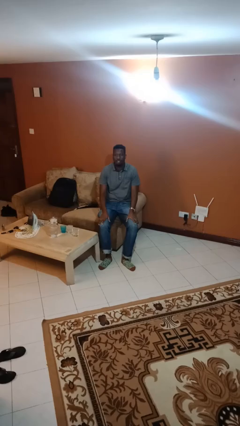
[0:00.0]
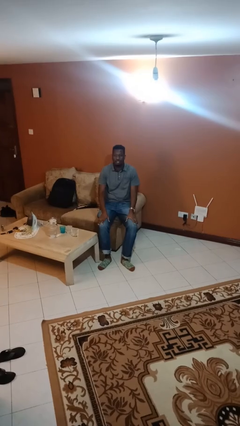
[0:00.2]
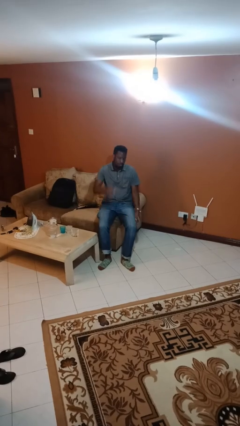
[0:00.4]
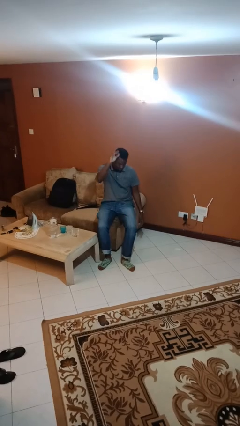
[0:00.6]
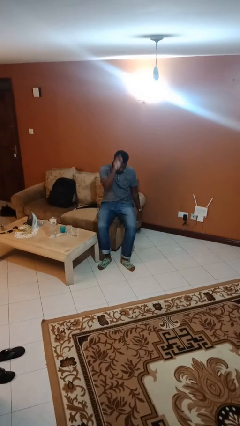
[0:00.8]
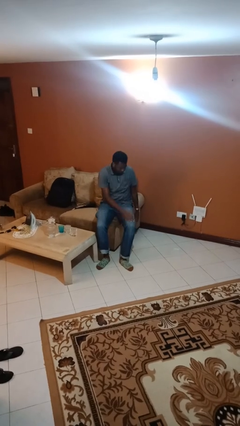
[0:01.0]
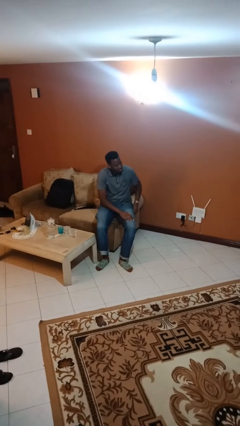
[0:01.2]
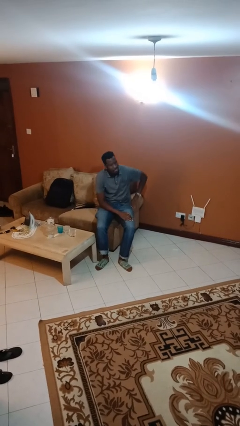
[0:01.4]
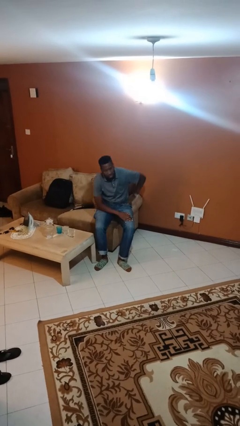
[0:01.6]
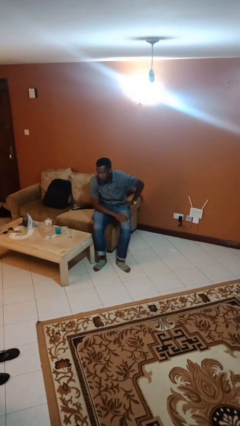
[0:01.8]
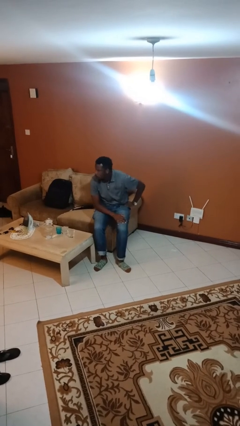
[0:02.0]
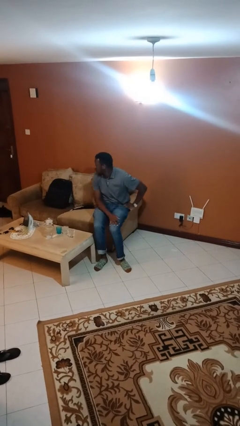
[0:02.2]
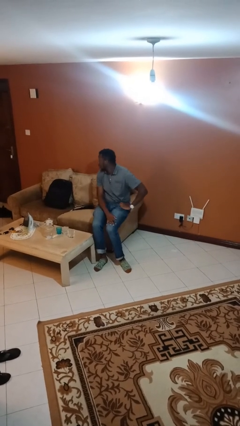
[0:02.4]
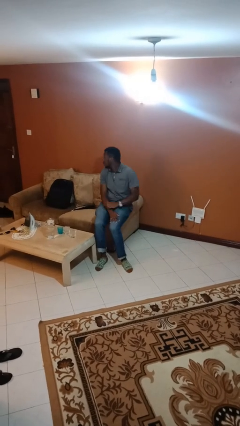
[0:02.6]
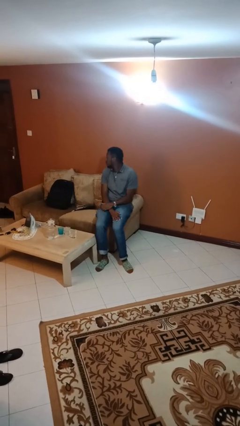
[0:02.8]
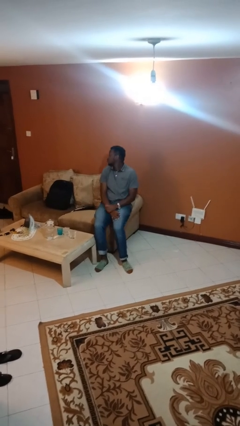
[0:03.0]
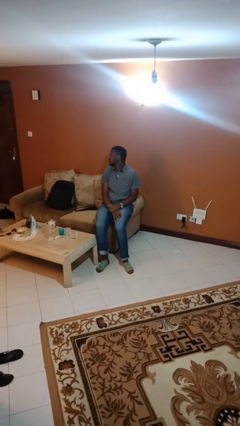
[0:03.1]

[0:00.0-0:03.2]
person slaps hands on thighs

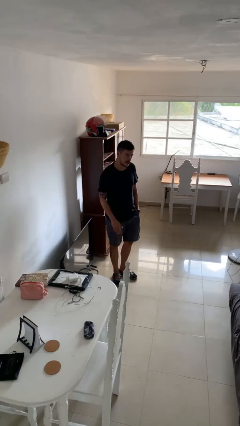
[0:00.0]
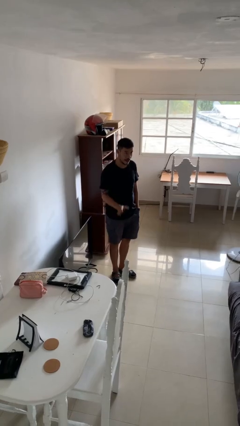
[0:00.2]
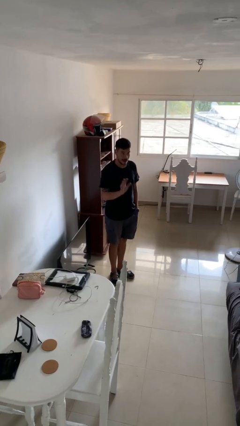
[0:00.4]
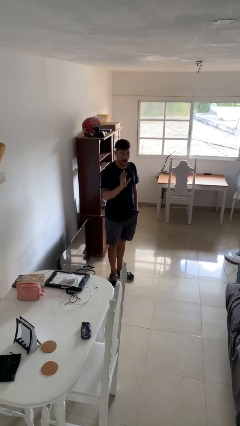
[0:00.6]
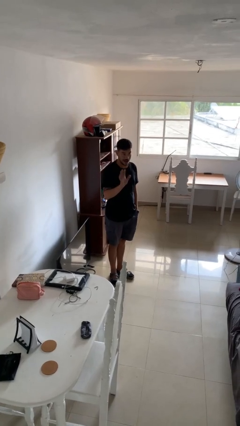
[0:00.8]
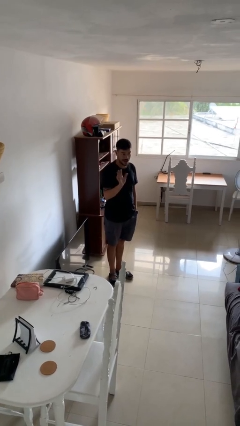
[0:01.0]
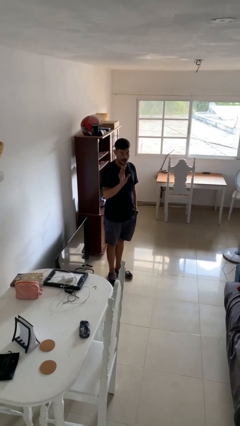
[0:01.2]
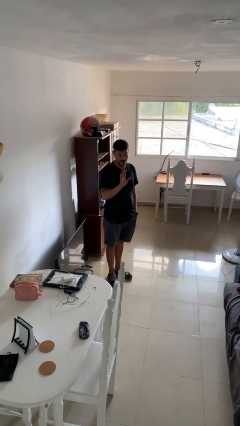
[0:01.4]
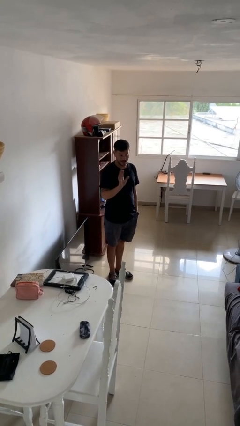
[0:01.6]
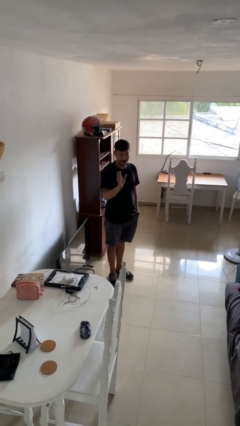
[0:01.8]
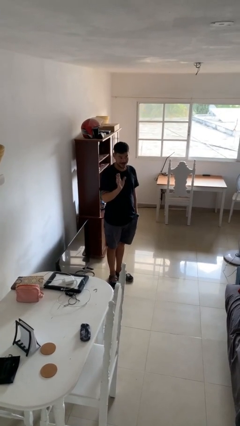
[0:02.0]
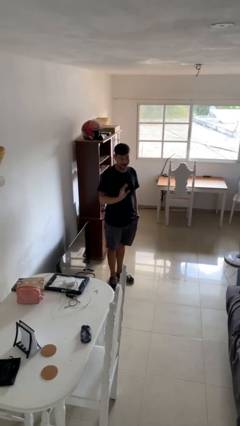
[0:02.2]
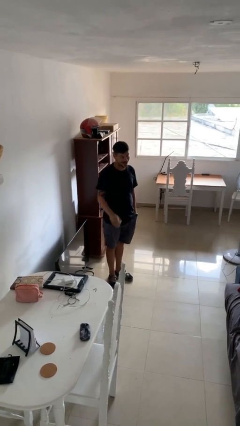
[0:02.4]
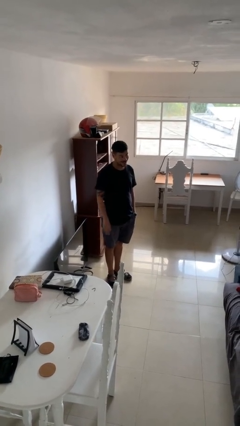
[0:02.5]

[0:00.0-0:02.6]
person waves at person

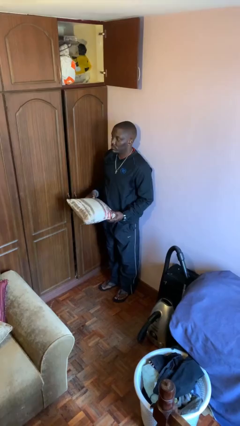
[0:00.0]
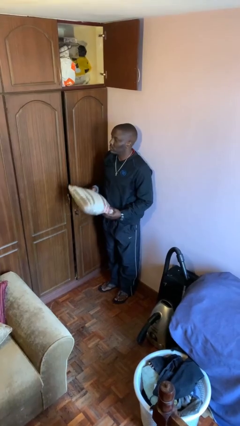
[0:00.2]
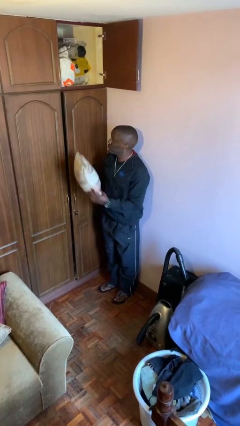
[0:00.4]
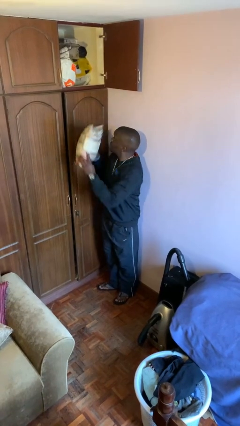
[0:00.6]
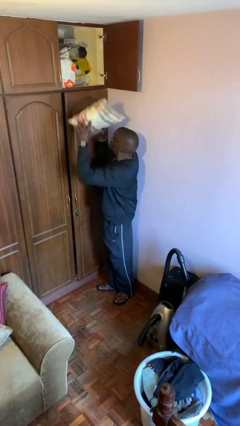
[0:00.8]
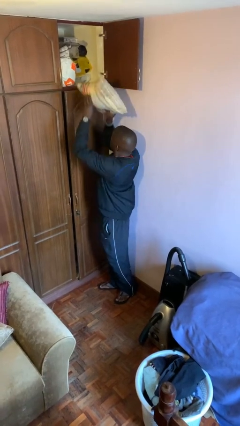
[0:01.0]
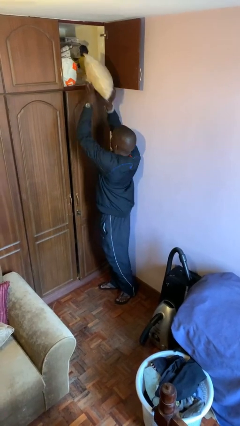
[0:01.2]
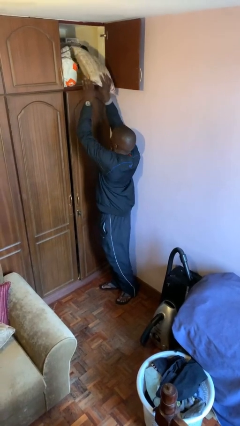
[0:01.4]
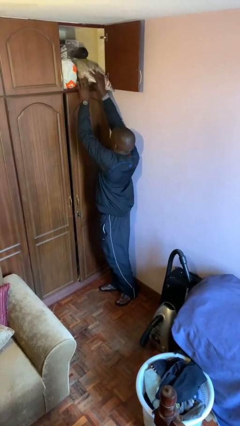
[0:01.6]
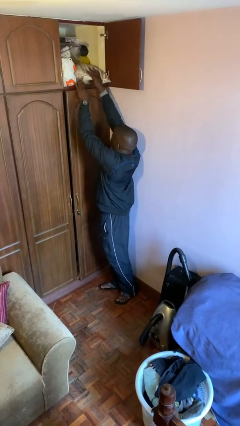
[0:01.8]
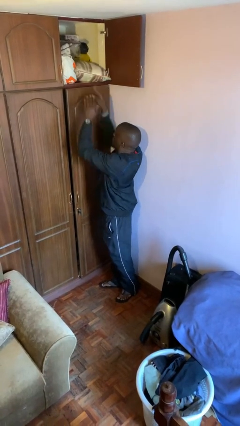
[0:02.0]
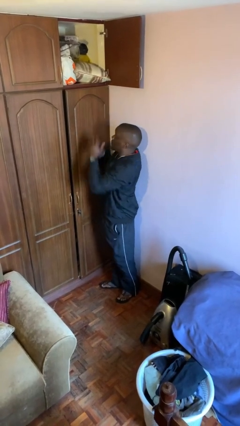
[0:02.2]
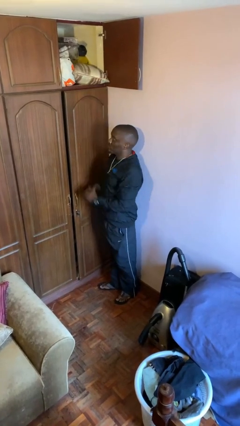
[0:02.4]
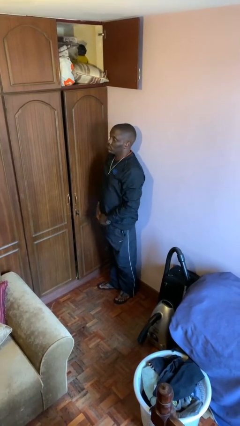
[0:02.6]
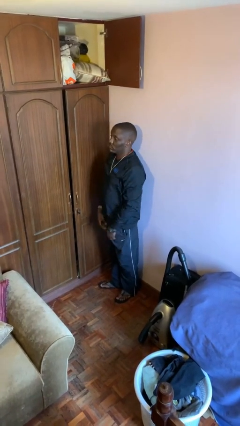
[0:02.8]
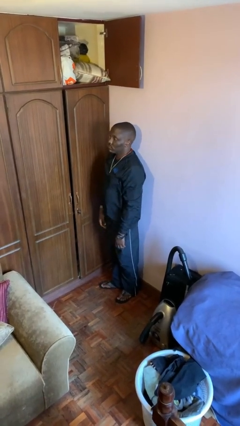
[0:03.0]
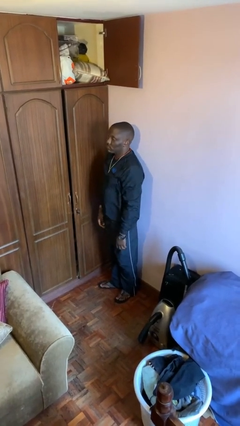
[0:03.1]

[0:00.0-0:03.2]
person puts down object on shelf

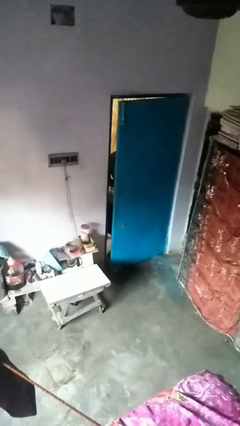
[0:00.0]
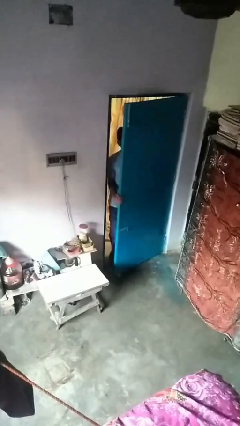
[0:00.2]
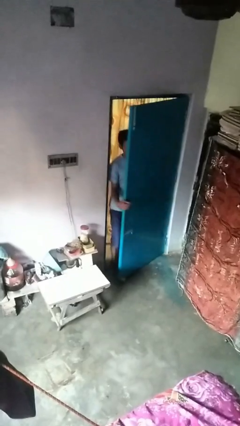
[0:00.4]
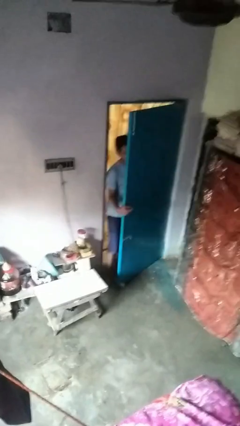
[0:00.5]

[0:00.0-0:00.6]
person opens facility door

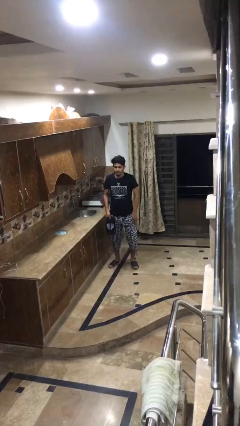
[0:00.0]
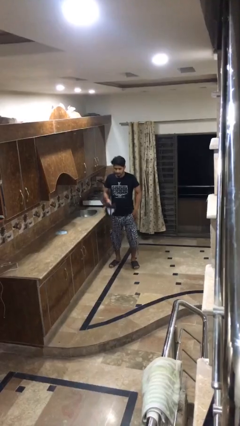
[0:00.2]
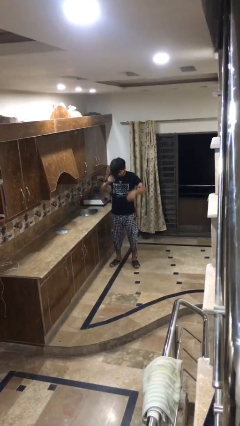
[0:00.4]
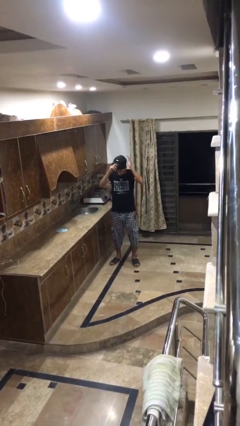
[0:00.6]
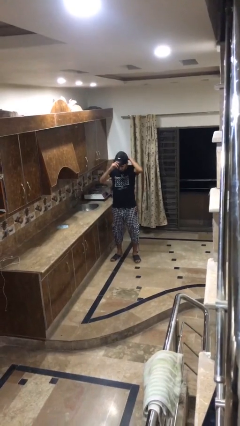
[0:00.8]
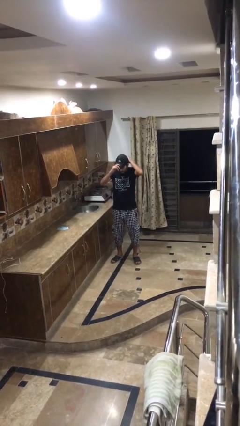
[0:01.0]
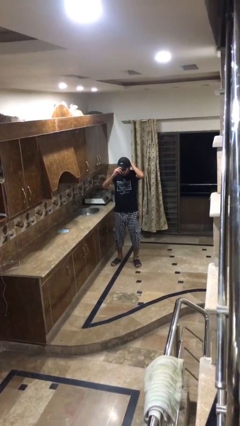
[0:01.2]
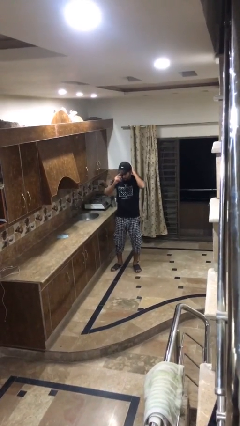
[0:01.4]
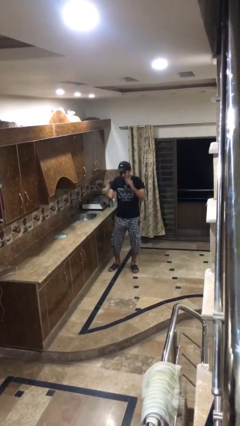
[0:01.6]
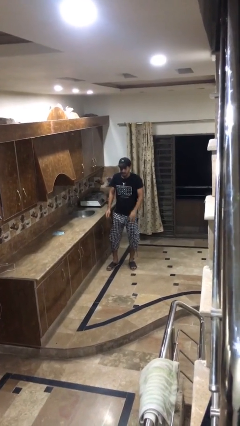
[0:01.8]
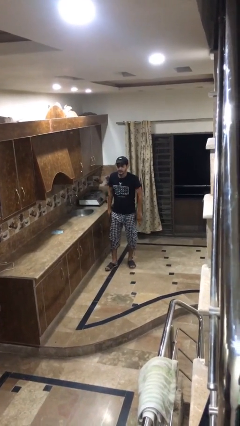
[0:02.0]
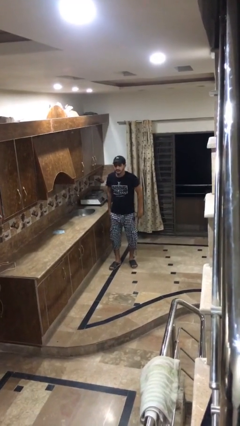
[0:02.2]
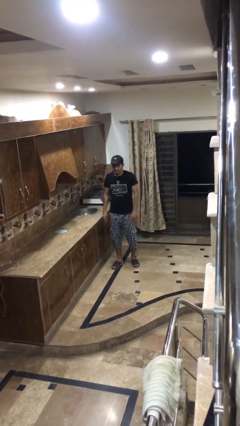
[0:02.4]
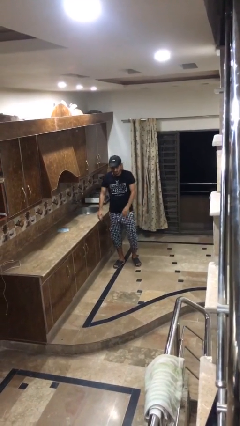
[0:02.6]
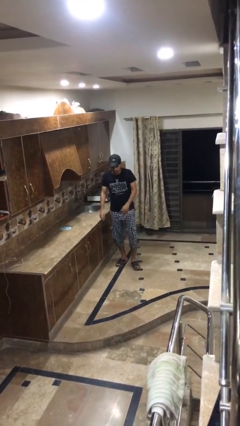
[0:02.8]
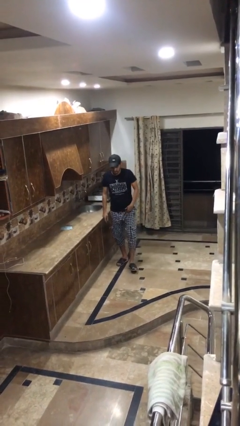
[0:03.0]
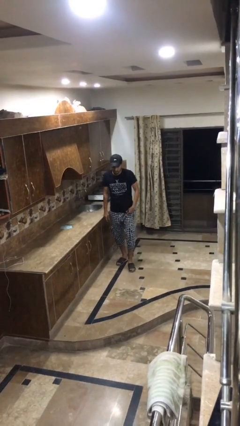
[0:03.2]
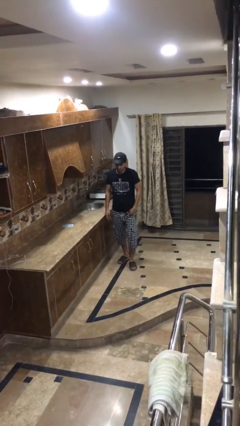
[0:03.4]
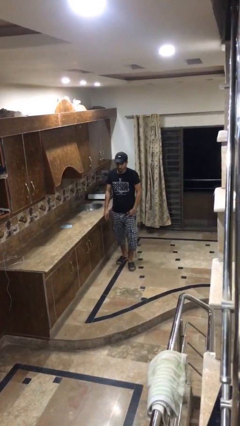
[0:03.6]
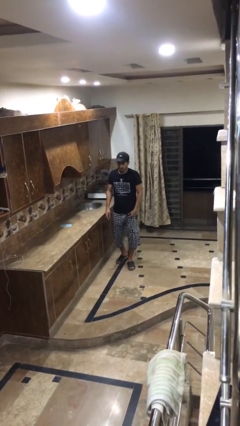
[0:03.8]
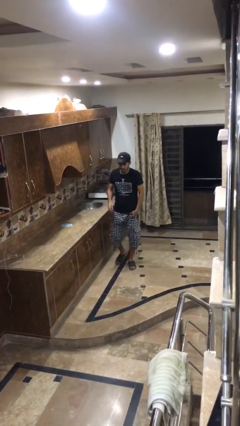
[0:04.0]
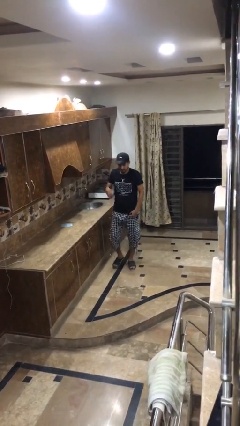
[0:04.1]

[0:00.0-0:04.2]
person puts on hat

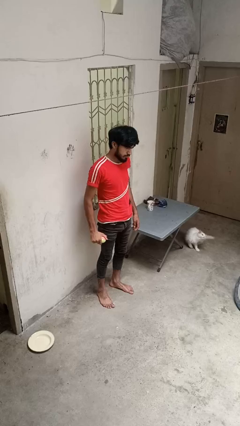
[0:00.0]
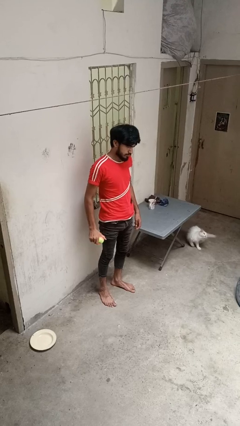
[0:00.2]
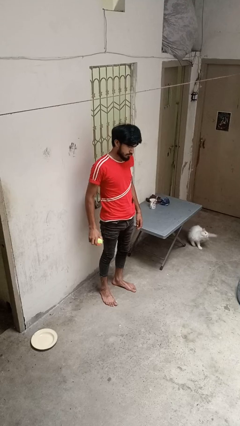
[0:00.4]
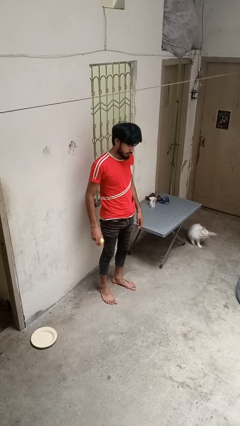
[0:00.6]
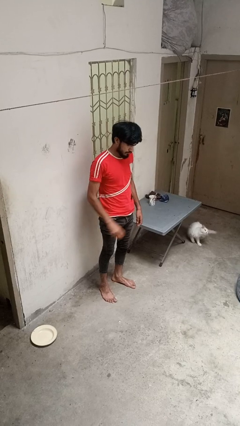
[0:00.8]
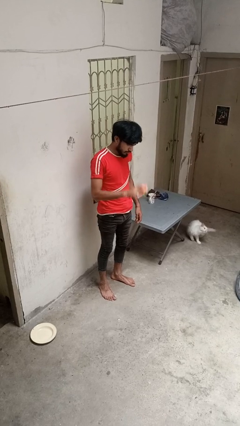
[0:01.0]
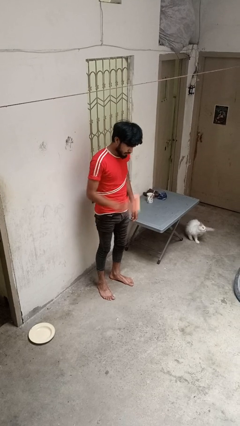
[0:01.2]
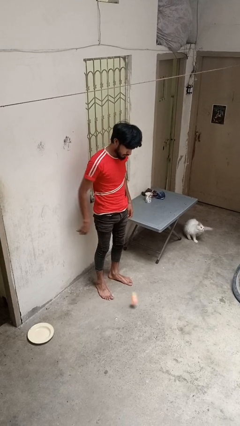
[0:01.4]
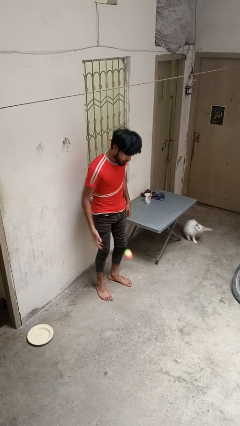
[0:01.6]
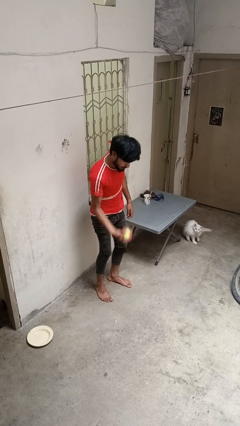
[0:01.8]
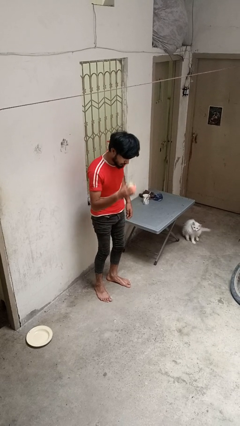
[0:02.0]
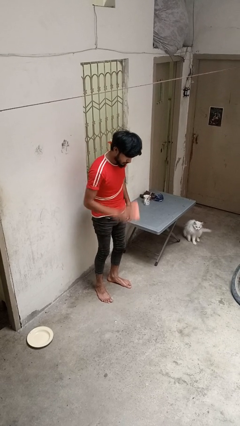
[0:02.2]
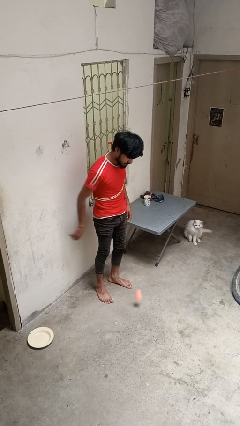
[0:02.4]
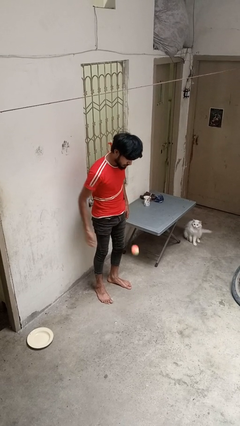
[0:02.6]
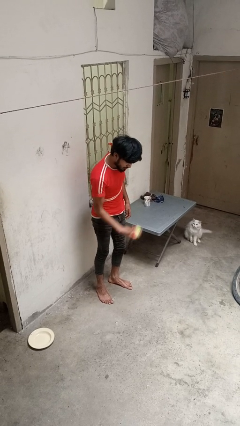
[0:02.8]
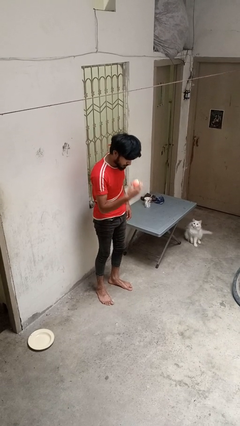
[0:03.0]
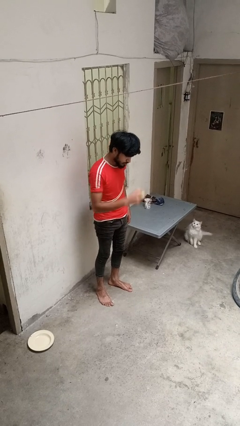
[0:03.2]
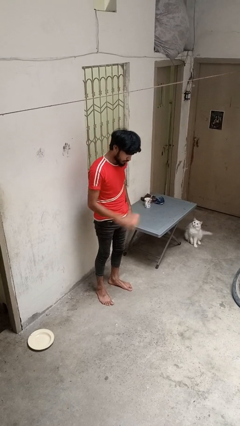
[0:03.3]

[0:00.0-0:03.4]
person bounces ball on floor

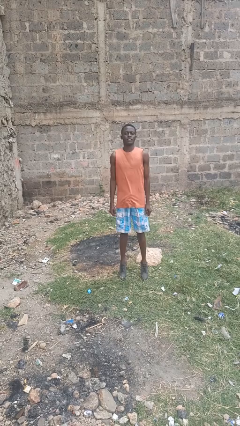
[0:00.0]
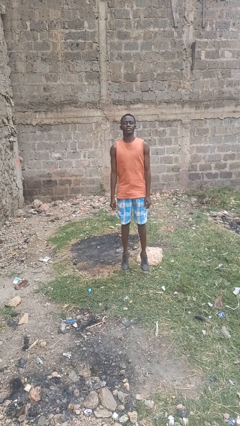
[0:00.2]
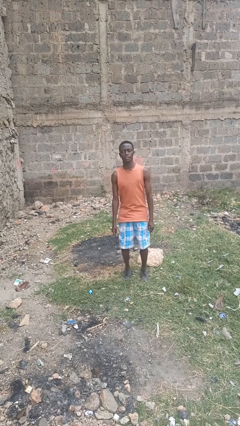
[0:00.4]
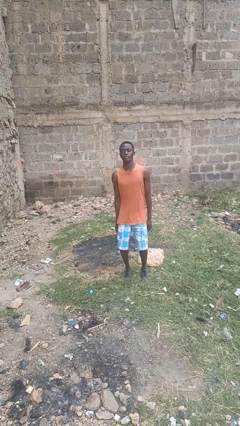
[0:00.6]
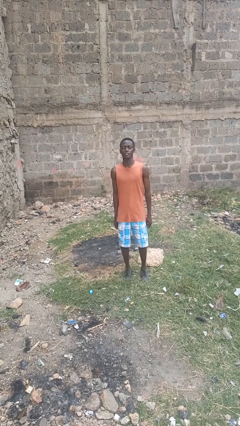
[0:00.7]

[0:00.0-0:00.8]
person jumps
